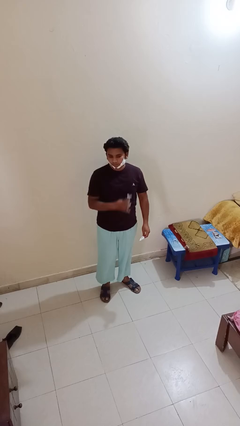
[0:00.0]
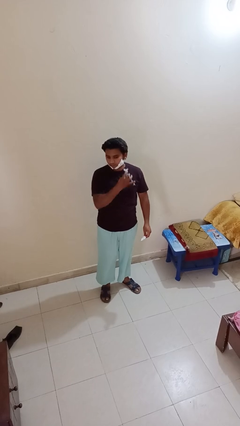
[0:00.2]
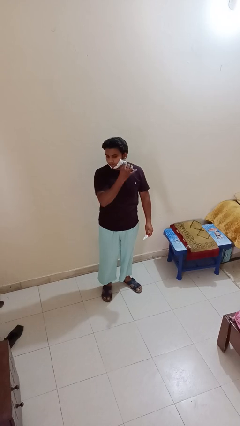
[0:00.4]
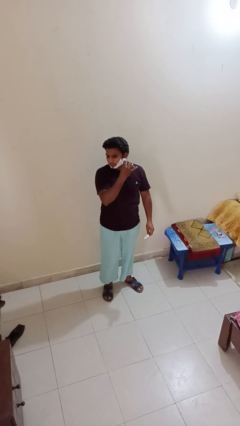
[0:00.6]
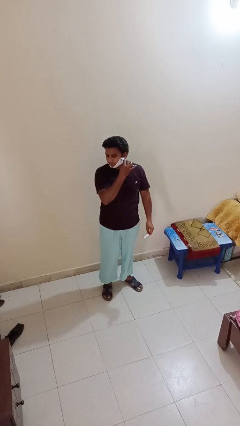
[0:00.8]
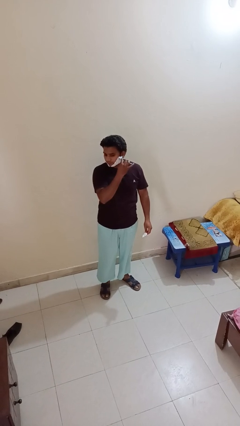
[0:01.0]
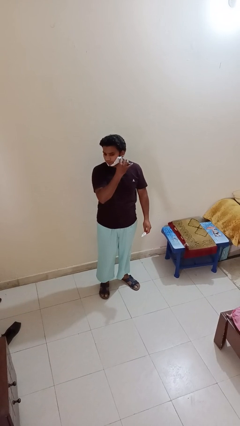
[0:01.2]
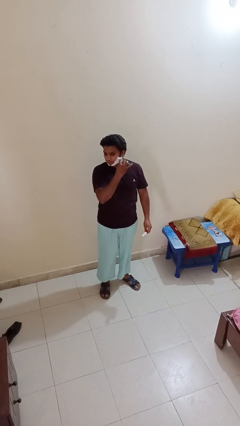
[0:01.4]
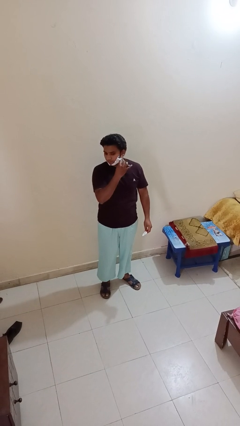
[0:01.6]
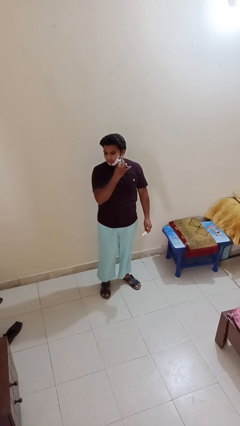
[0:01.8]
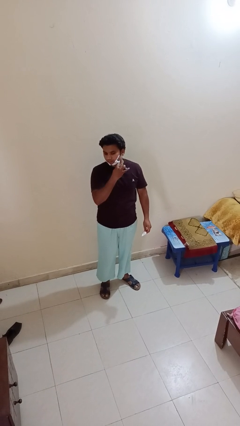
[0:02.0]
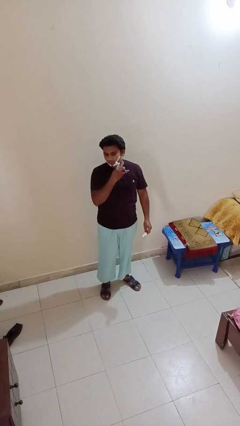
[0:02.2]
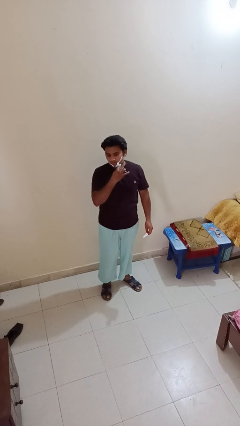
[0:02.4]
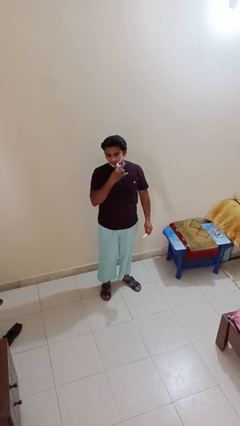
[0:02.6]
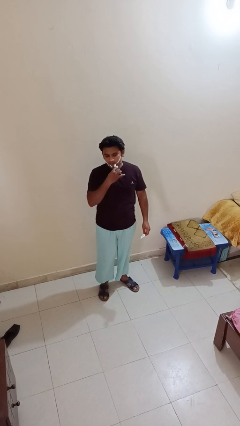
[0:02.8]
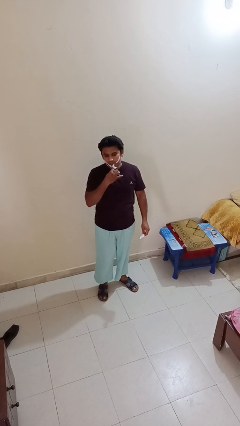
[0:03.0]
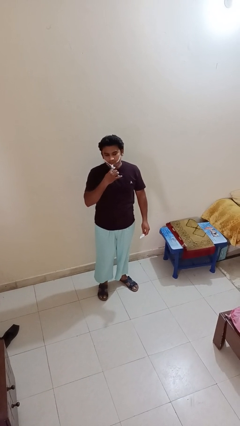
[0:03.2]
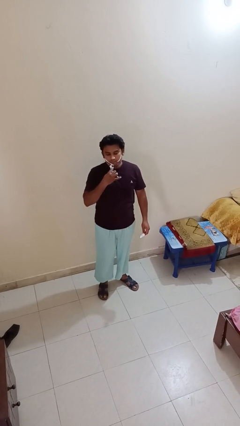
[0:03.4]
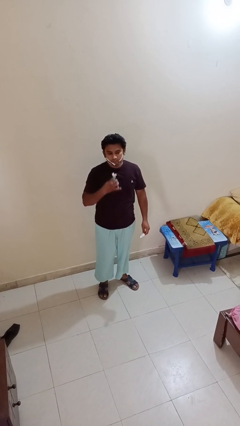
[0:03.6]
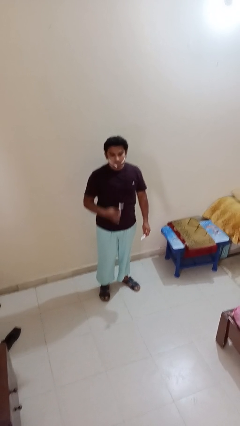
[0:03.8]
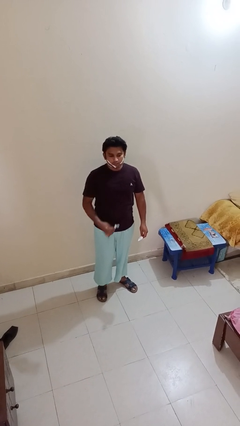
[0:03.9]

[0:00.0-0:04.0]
person shaves face

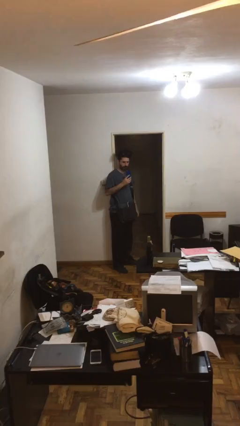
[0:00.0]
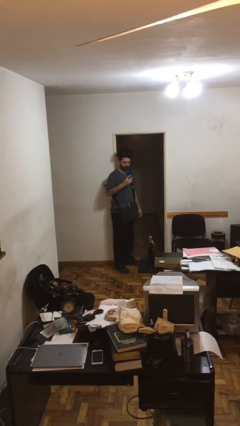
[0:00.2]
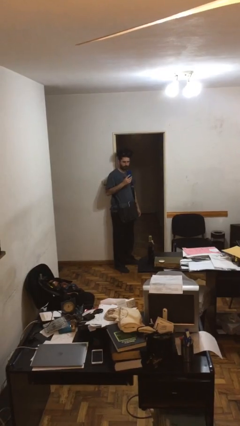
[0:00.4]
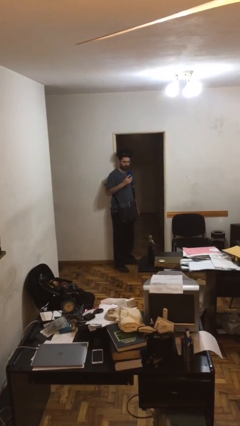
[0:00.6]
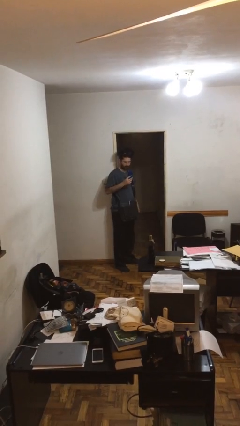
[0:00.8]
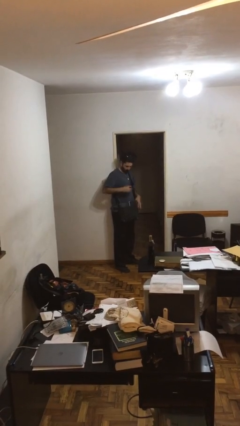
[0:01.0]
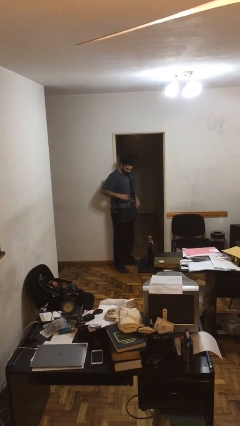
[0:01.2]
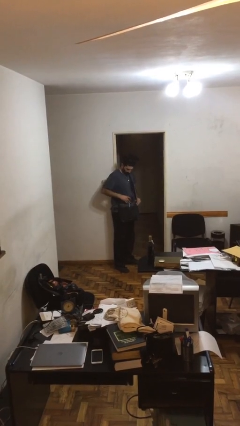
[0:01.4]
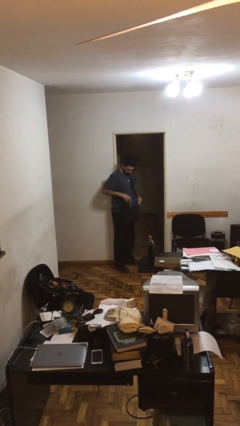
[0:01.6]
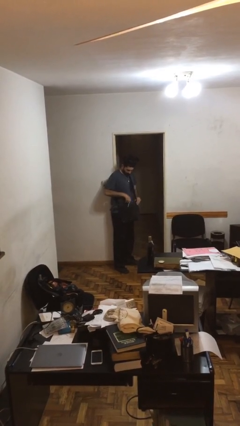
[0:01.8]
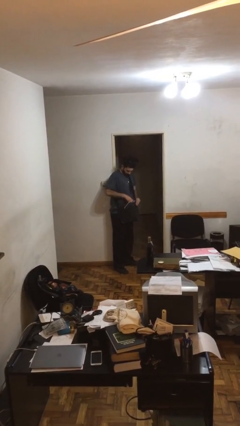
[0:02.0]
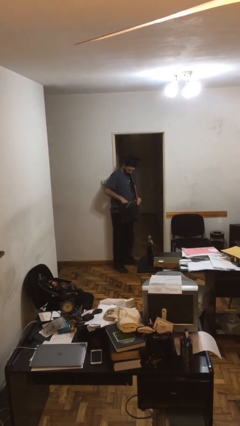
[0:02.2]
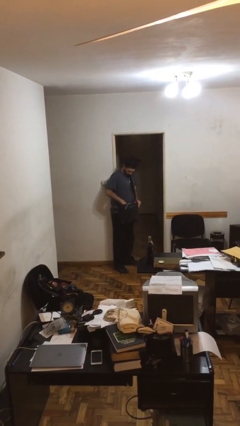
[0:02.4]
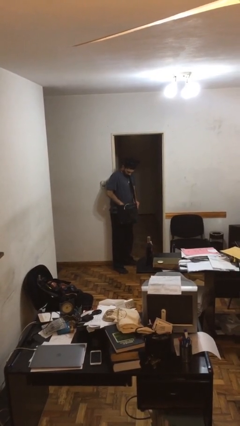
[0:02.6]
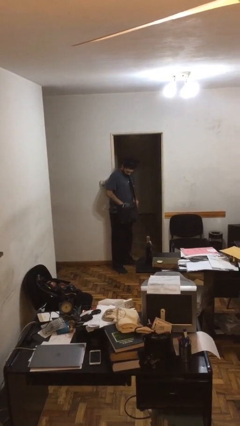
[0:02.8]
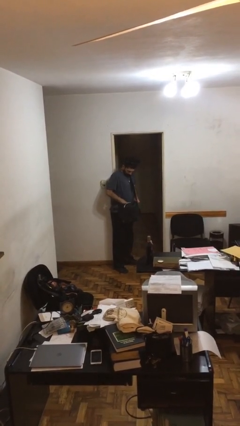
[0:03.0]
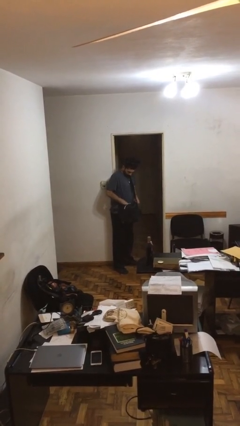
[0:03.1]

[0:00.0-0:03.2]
person puts object into purse

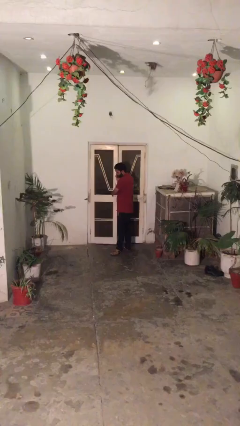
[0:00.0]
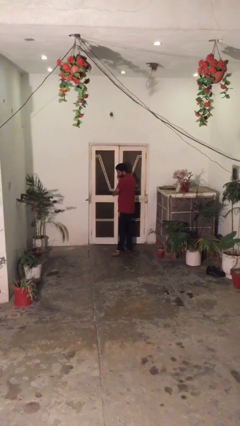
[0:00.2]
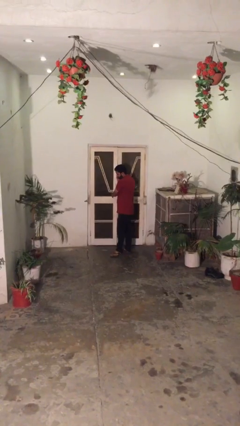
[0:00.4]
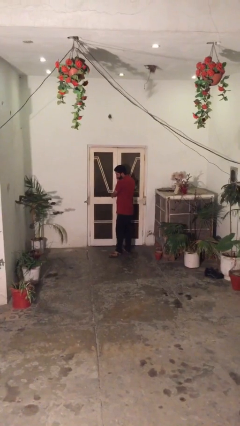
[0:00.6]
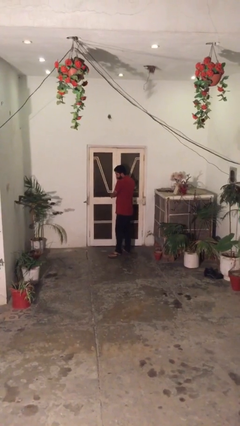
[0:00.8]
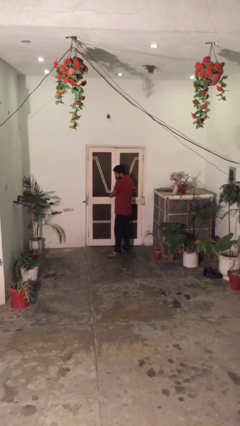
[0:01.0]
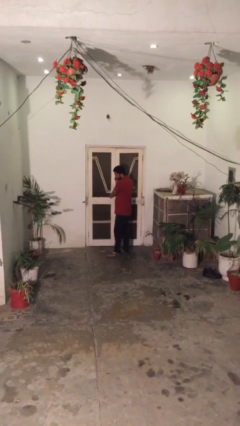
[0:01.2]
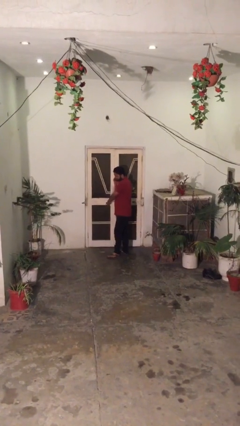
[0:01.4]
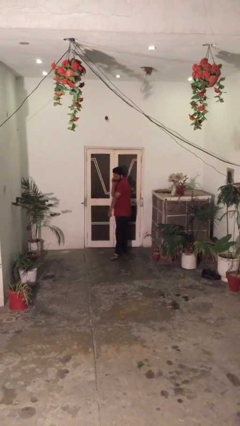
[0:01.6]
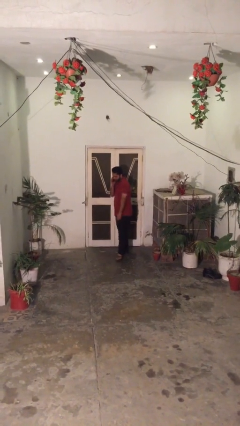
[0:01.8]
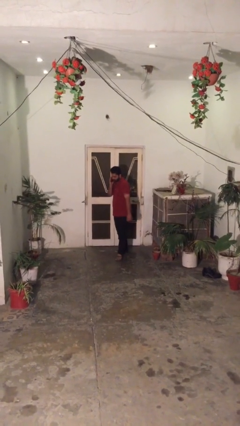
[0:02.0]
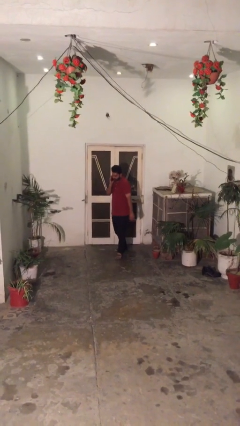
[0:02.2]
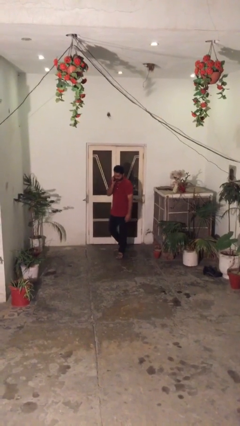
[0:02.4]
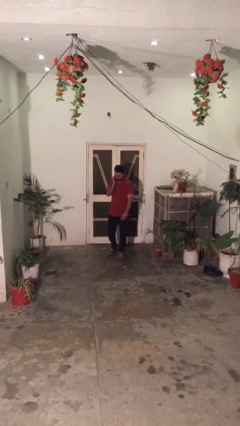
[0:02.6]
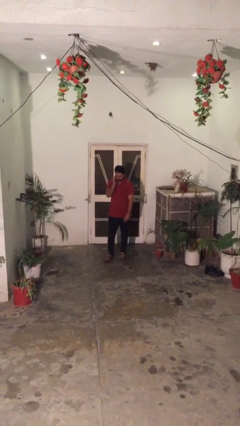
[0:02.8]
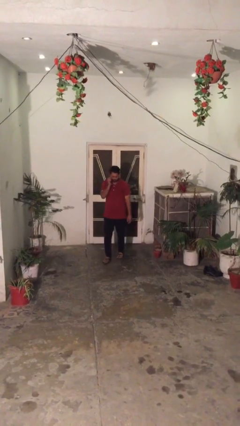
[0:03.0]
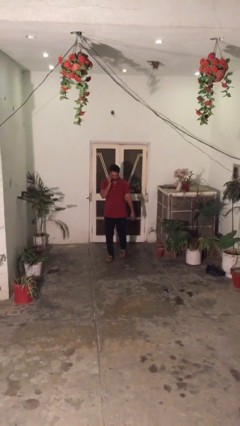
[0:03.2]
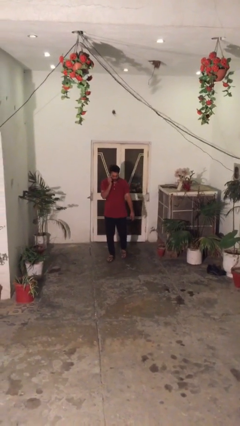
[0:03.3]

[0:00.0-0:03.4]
person closes facility door

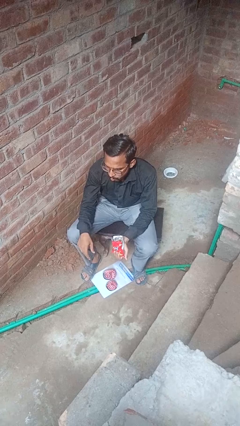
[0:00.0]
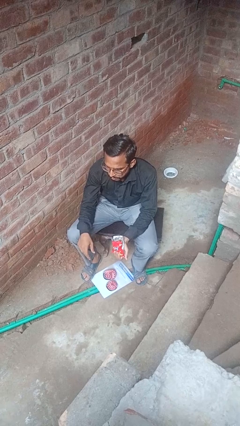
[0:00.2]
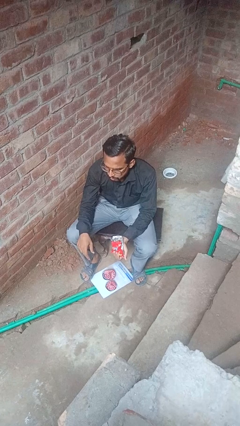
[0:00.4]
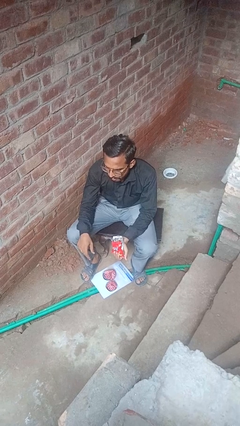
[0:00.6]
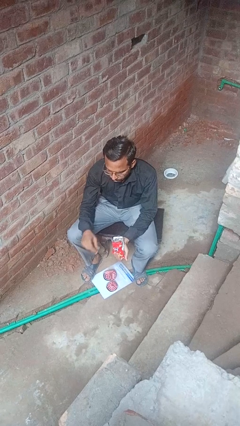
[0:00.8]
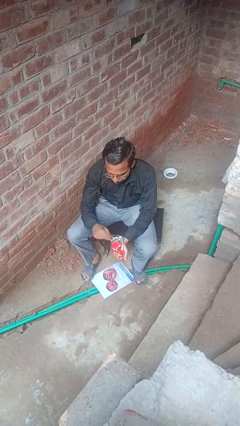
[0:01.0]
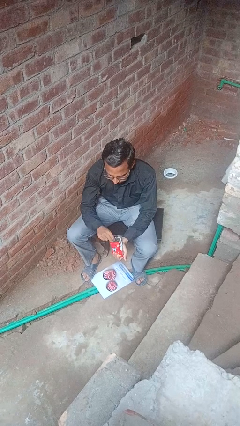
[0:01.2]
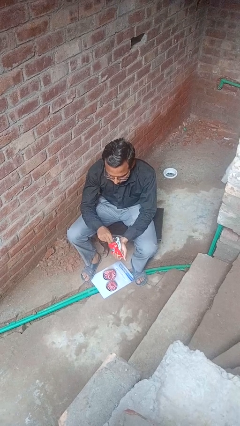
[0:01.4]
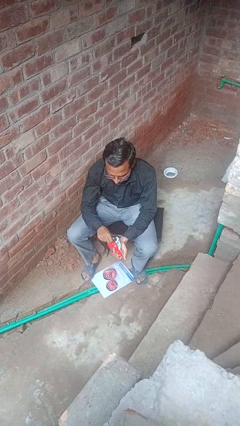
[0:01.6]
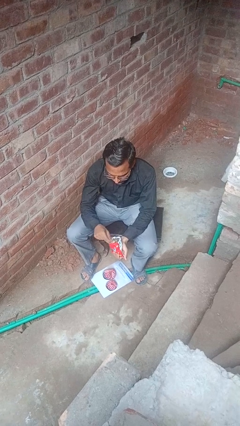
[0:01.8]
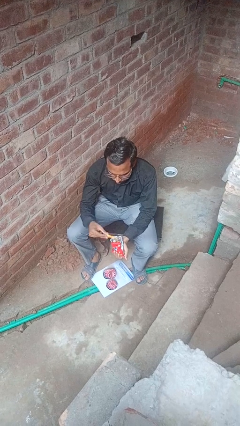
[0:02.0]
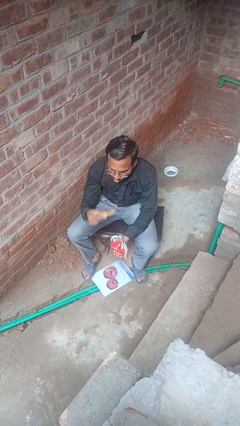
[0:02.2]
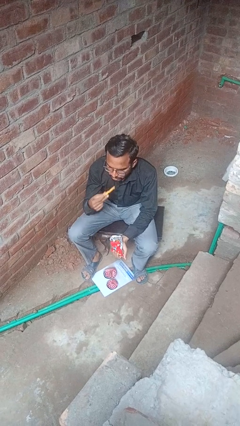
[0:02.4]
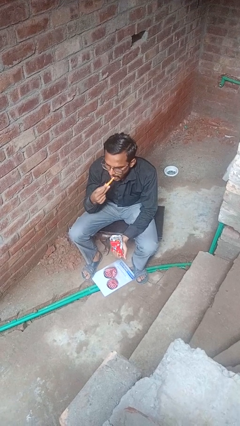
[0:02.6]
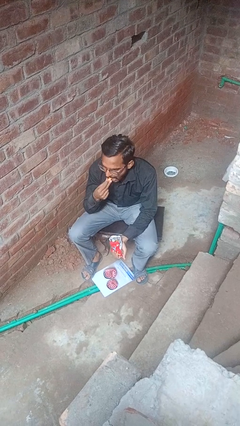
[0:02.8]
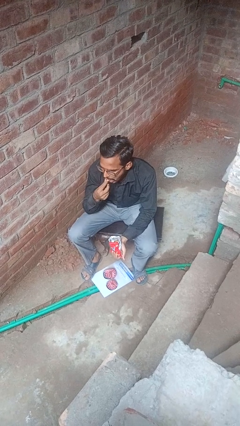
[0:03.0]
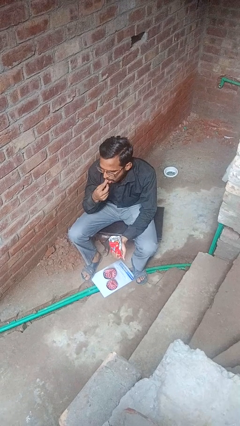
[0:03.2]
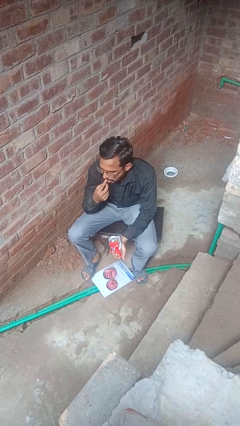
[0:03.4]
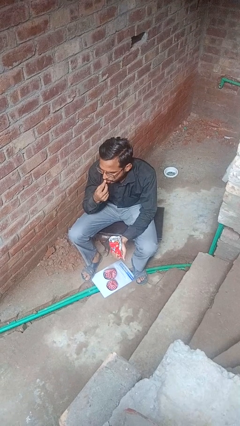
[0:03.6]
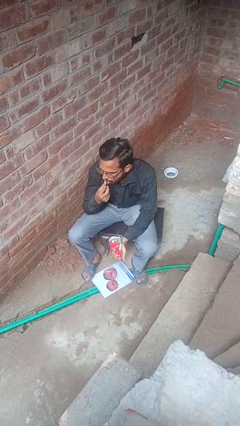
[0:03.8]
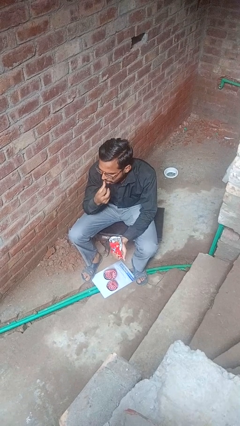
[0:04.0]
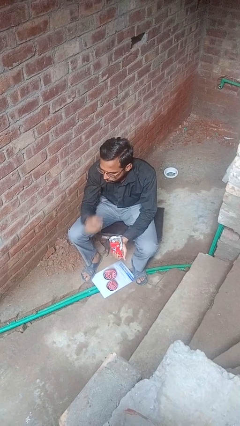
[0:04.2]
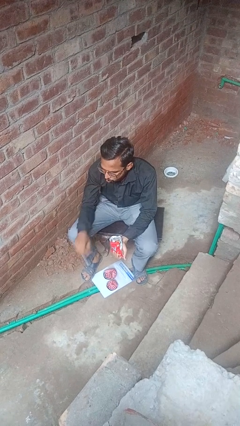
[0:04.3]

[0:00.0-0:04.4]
person eats snack from bag

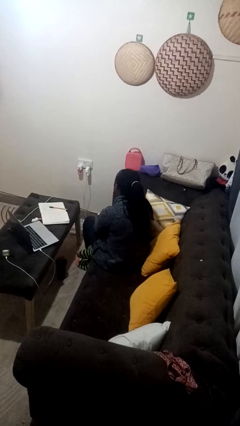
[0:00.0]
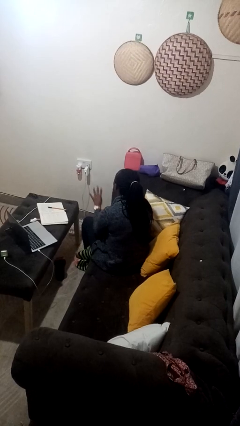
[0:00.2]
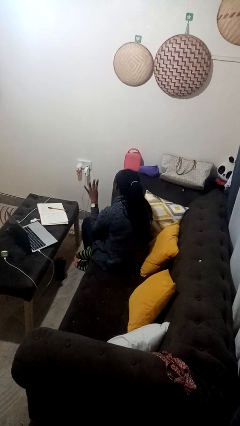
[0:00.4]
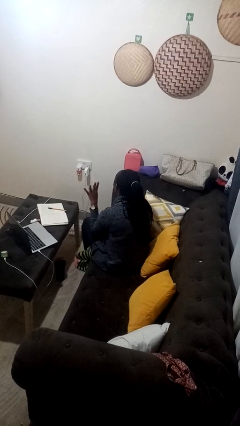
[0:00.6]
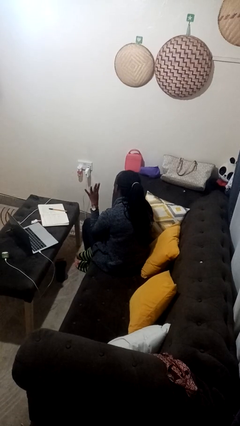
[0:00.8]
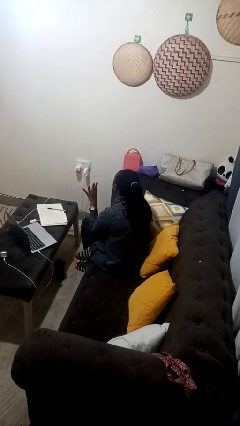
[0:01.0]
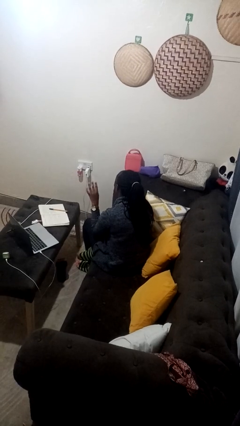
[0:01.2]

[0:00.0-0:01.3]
person gestures number four

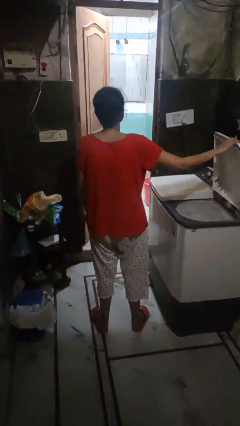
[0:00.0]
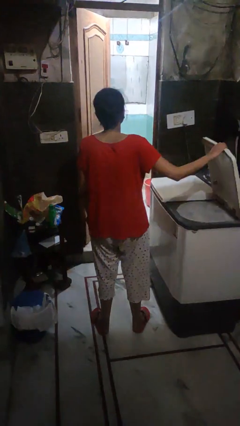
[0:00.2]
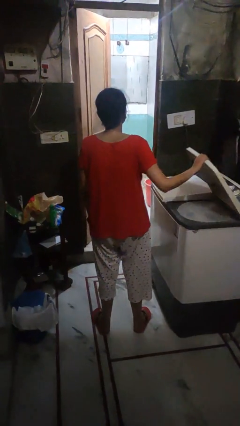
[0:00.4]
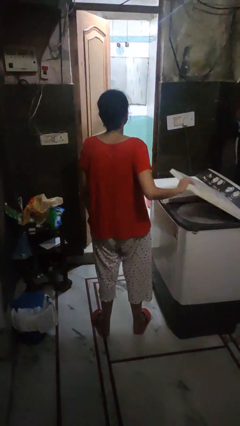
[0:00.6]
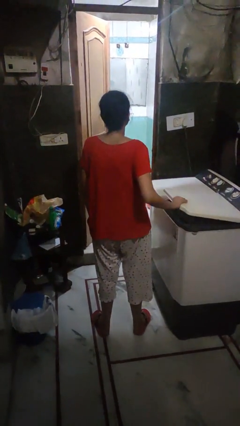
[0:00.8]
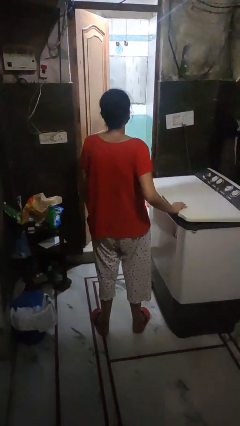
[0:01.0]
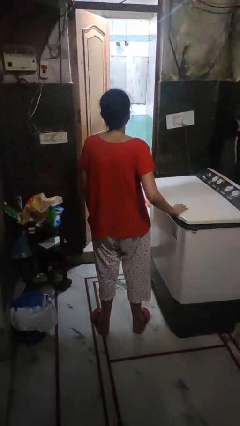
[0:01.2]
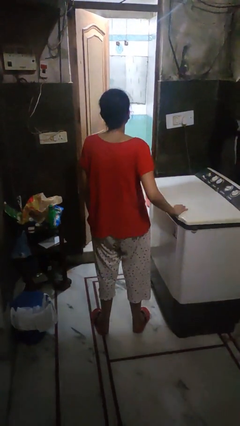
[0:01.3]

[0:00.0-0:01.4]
person closes clothes washer
